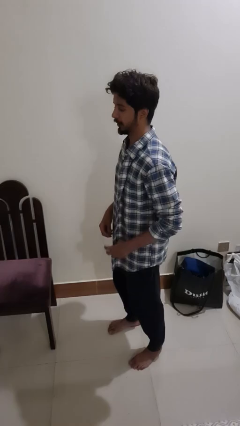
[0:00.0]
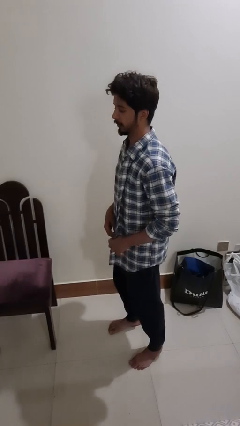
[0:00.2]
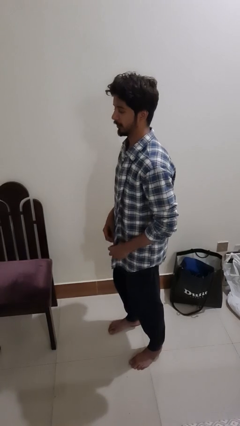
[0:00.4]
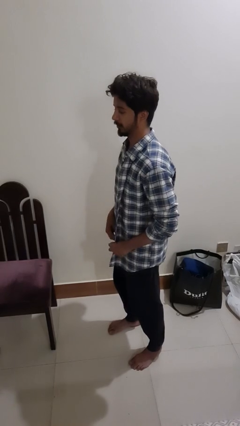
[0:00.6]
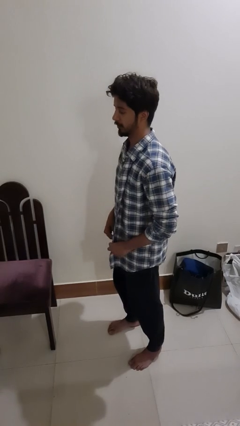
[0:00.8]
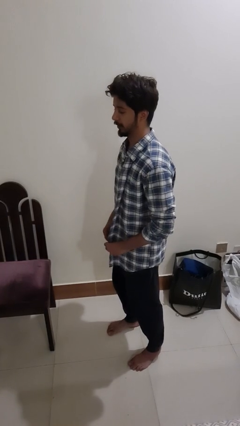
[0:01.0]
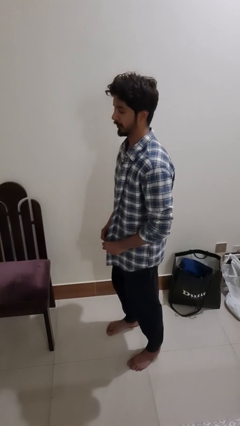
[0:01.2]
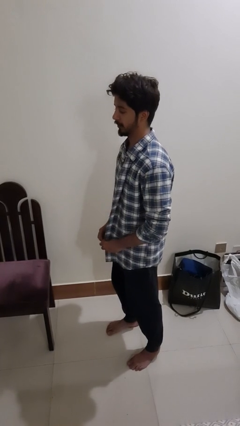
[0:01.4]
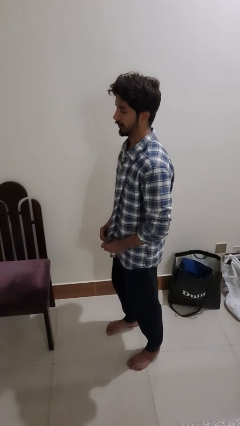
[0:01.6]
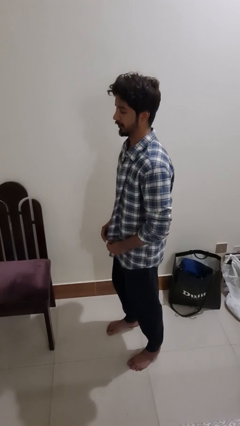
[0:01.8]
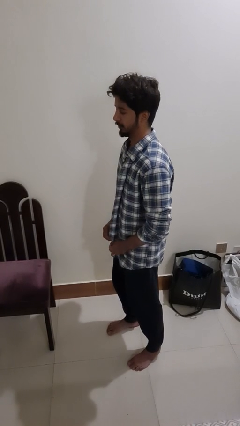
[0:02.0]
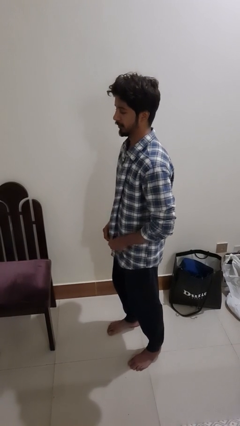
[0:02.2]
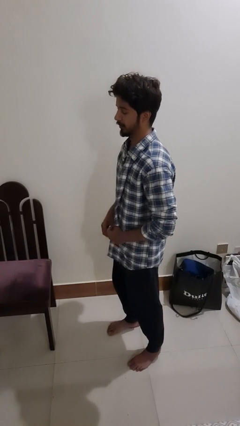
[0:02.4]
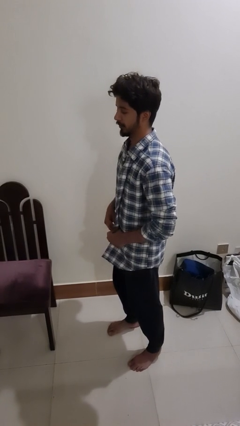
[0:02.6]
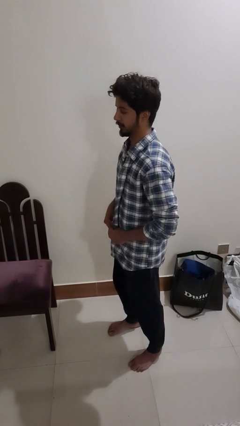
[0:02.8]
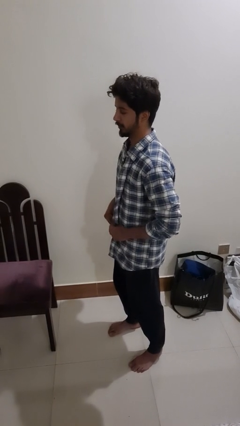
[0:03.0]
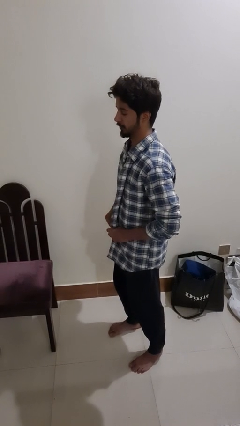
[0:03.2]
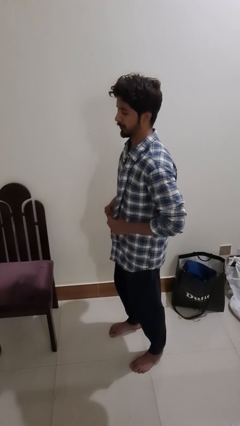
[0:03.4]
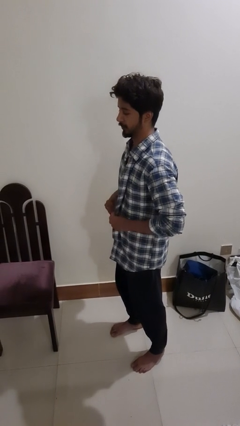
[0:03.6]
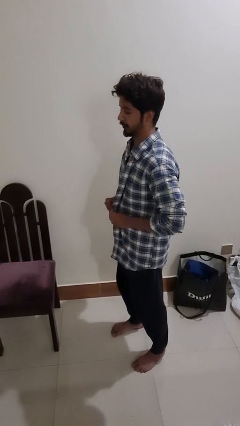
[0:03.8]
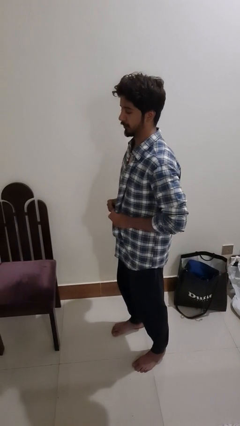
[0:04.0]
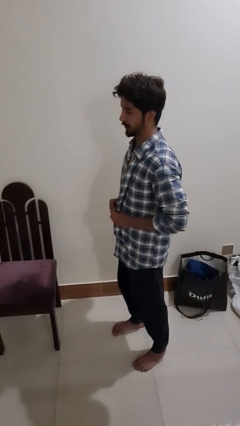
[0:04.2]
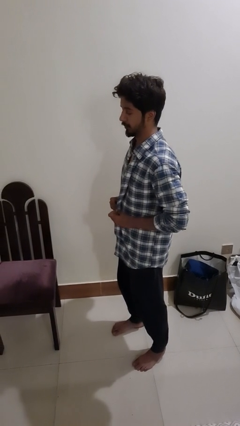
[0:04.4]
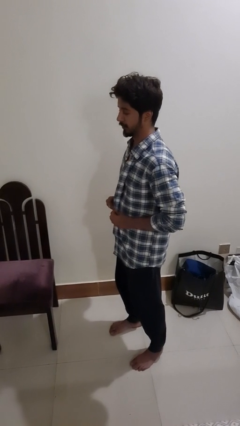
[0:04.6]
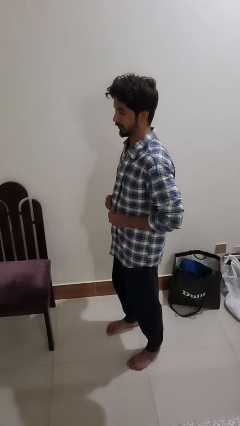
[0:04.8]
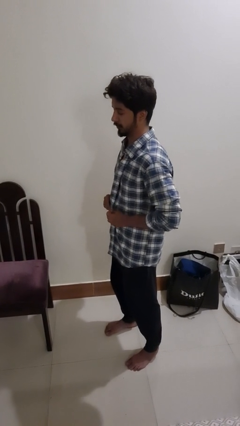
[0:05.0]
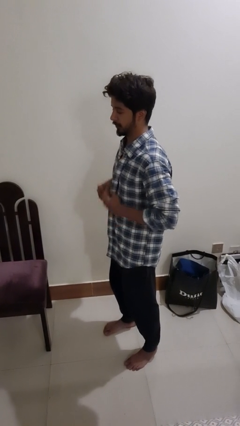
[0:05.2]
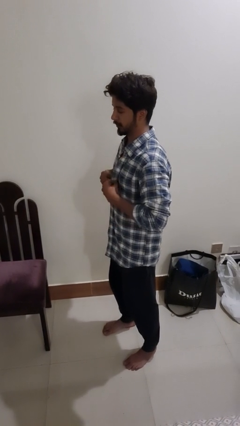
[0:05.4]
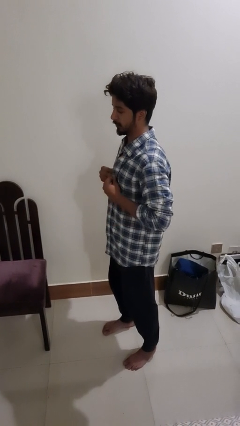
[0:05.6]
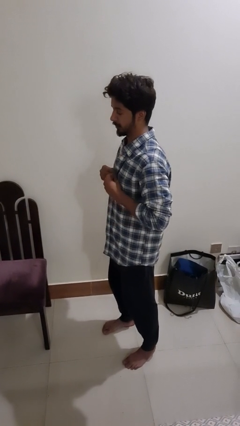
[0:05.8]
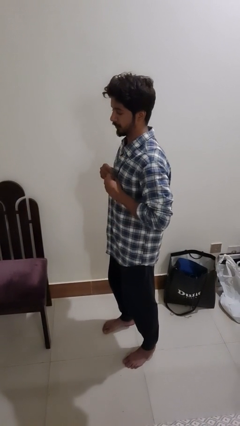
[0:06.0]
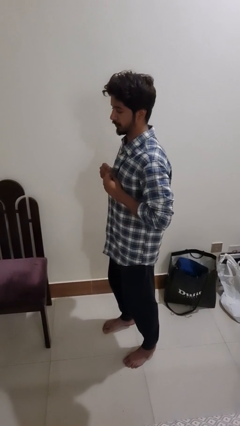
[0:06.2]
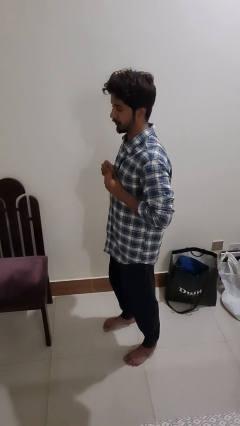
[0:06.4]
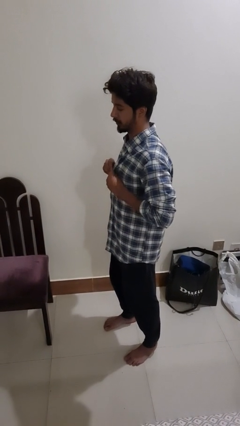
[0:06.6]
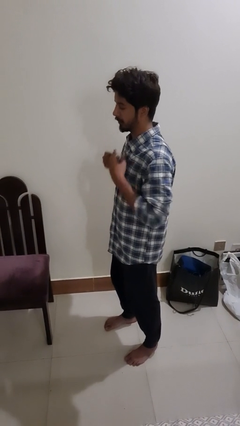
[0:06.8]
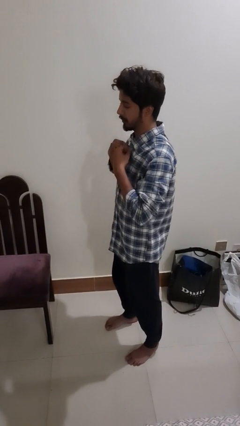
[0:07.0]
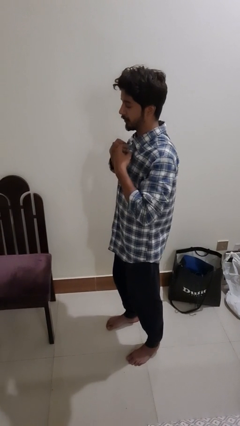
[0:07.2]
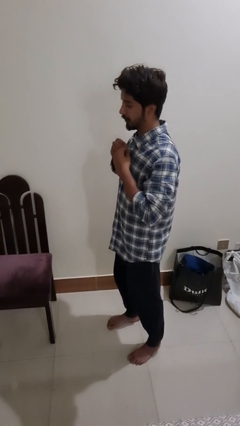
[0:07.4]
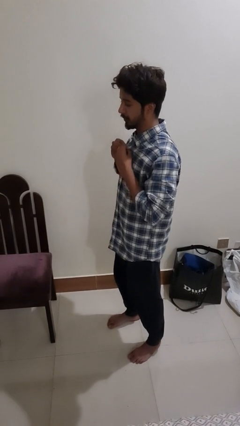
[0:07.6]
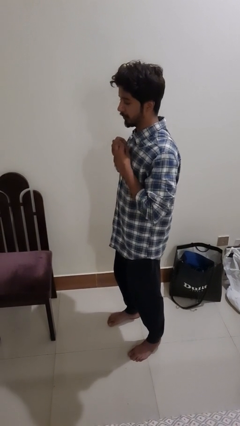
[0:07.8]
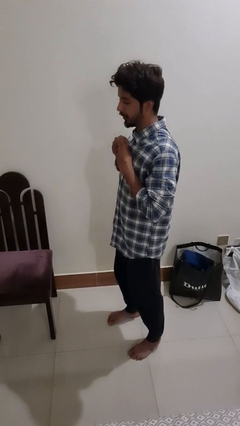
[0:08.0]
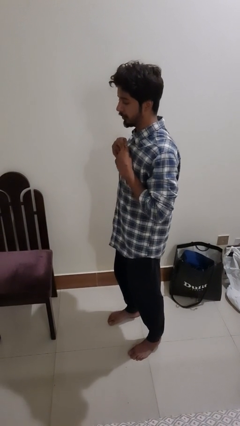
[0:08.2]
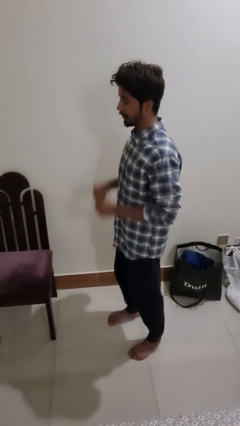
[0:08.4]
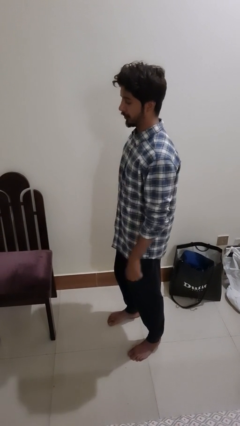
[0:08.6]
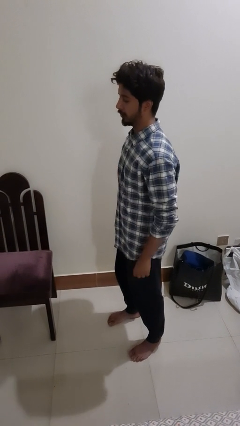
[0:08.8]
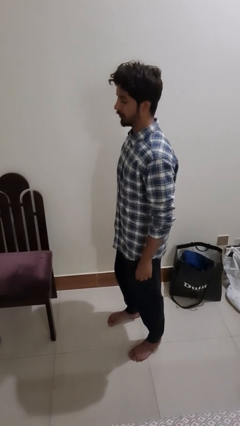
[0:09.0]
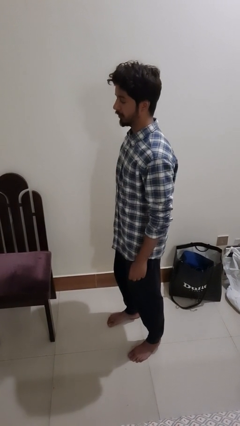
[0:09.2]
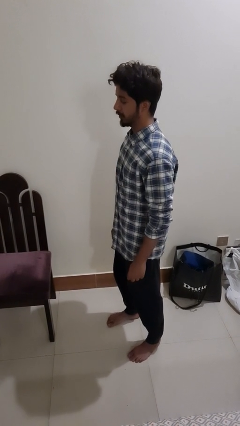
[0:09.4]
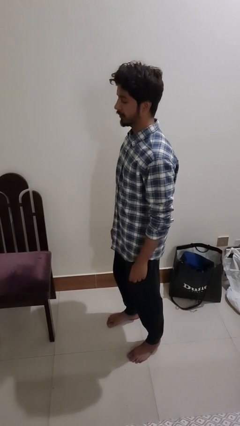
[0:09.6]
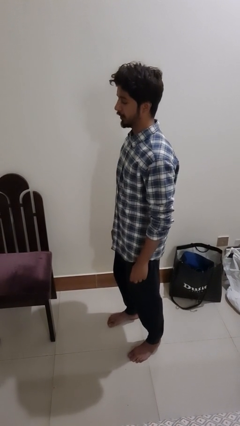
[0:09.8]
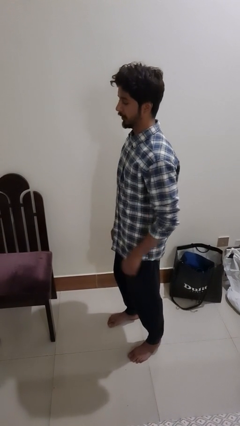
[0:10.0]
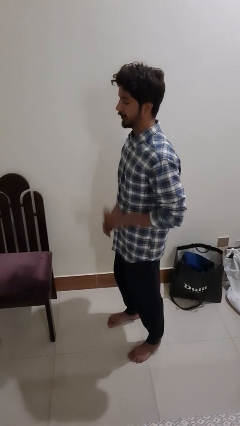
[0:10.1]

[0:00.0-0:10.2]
person buttons shirt

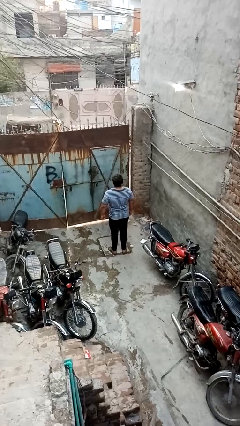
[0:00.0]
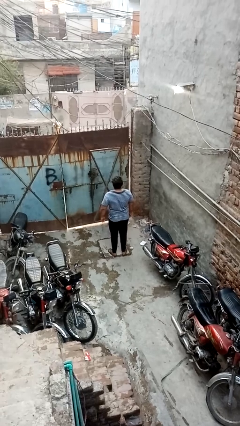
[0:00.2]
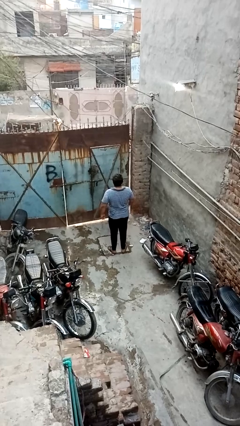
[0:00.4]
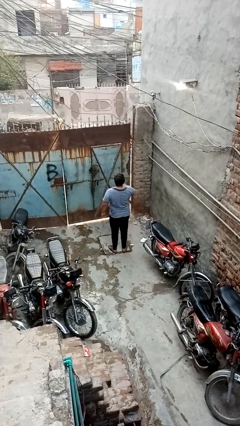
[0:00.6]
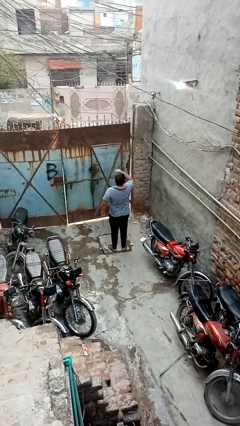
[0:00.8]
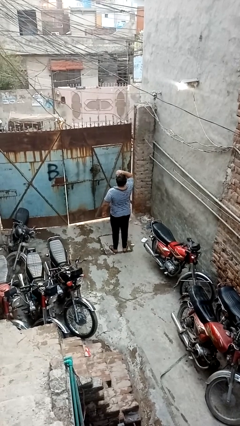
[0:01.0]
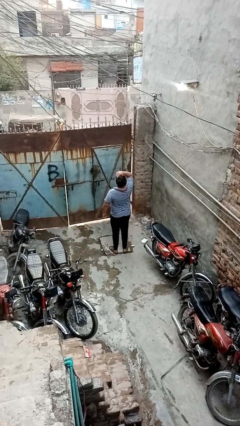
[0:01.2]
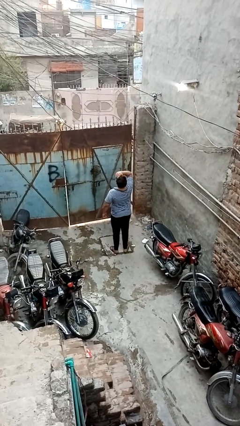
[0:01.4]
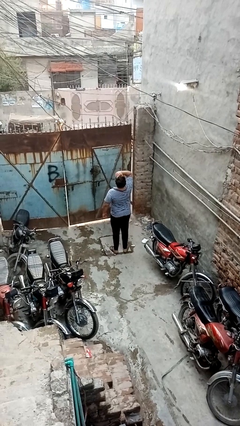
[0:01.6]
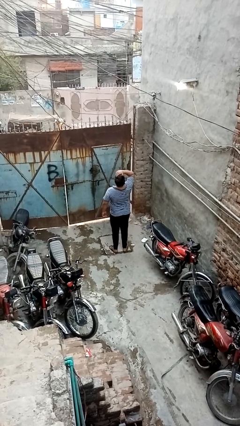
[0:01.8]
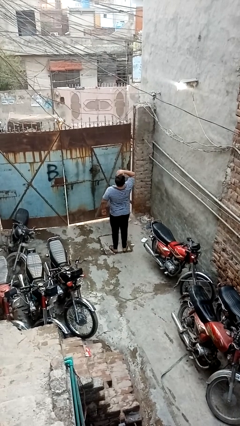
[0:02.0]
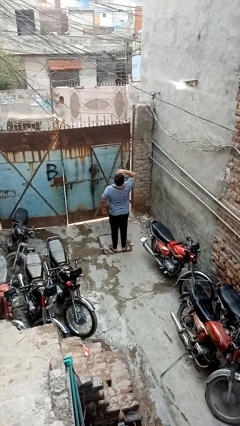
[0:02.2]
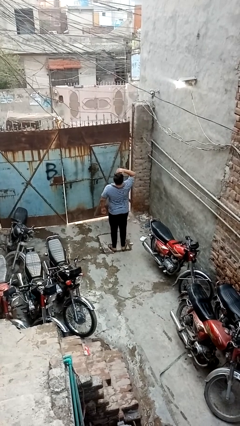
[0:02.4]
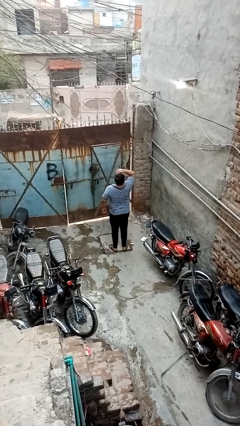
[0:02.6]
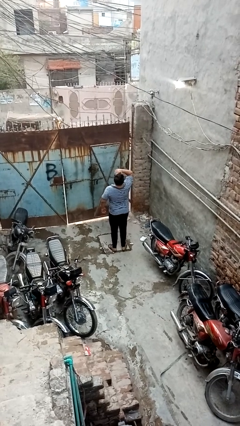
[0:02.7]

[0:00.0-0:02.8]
person shades eyes

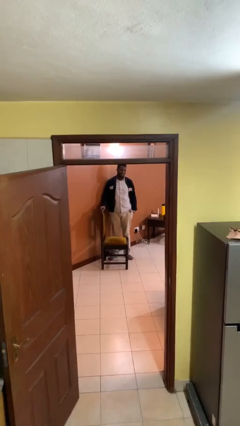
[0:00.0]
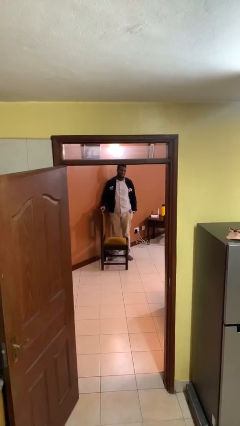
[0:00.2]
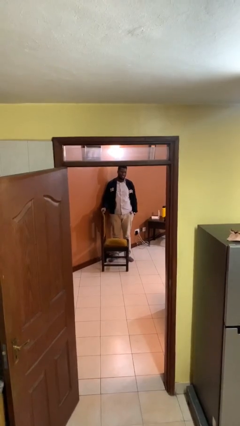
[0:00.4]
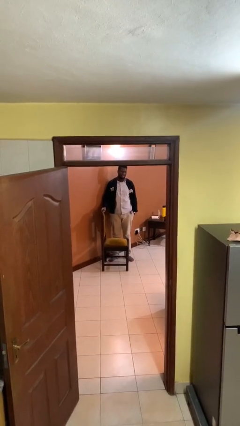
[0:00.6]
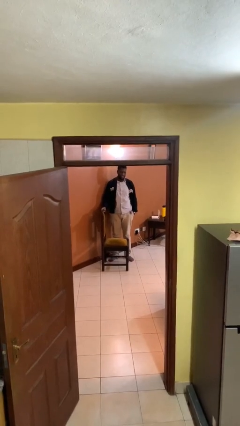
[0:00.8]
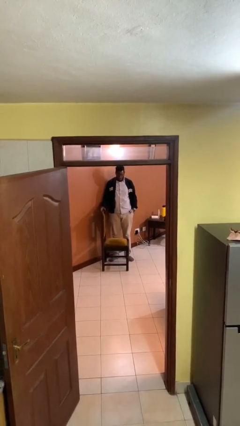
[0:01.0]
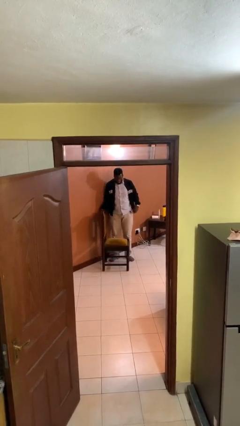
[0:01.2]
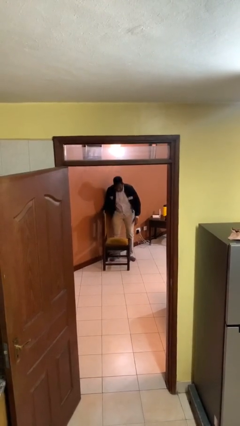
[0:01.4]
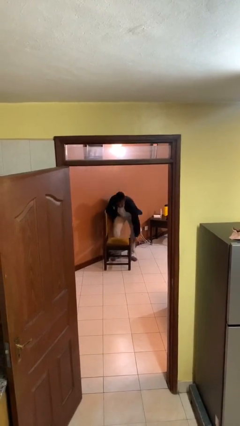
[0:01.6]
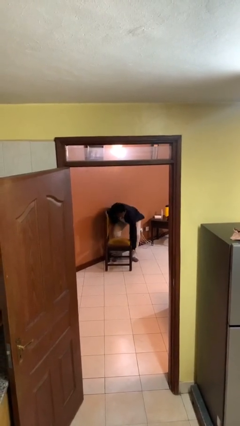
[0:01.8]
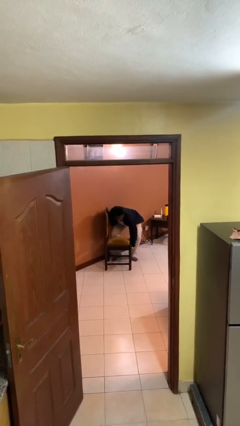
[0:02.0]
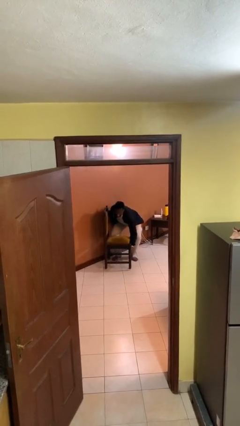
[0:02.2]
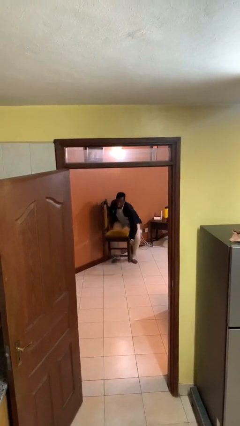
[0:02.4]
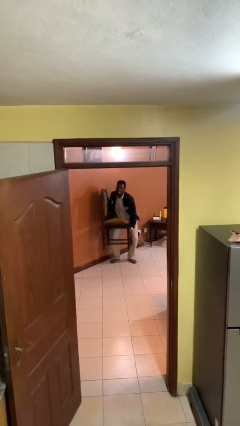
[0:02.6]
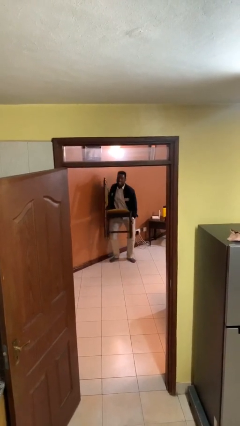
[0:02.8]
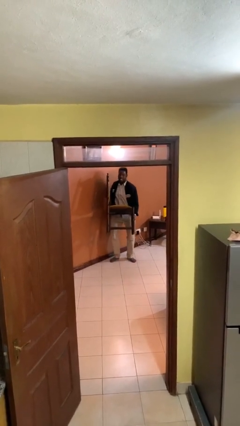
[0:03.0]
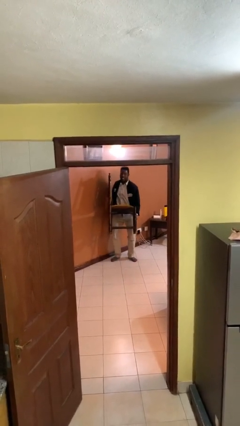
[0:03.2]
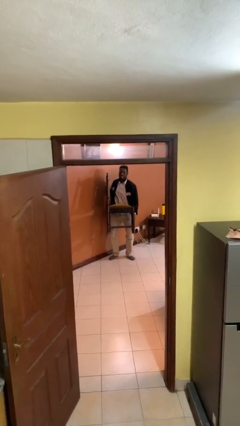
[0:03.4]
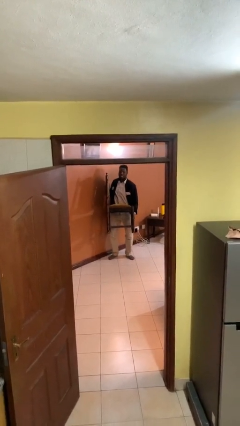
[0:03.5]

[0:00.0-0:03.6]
person picks up object from floor

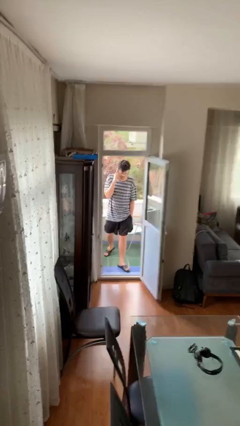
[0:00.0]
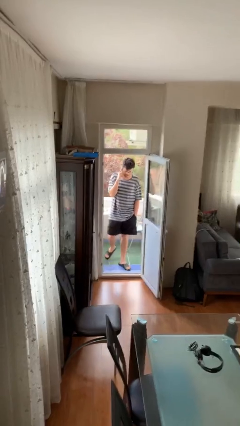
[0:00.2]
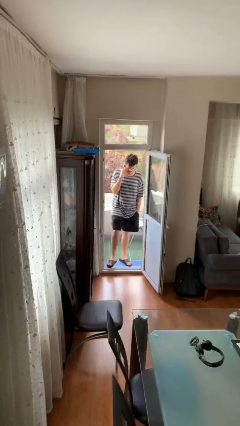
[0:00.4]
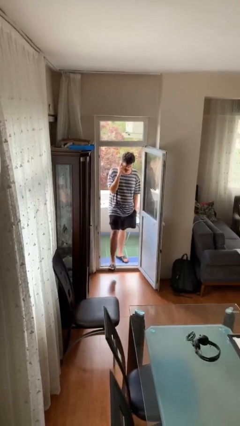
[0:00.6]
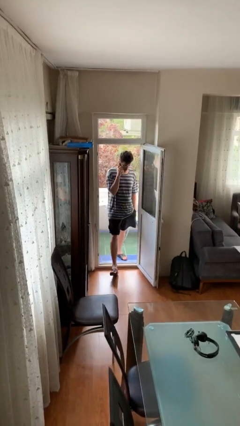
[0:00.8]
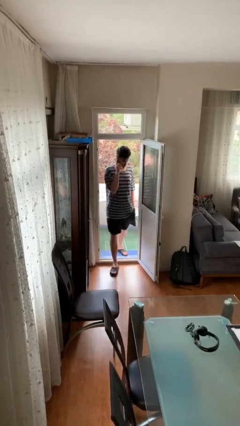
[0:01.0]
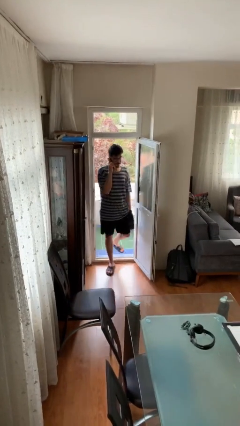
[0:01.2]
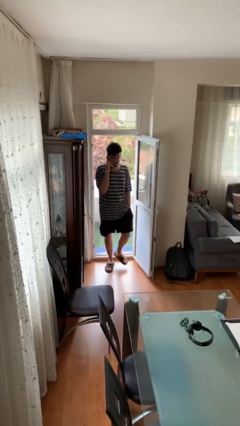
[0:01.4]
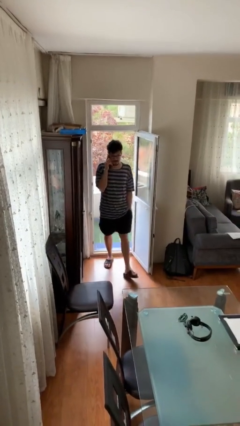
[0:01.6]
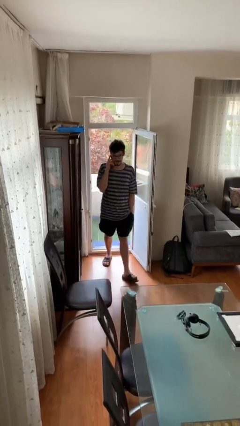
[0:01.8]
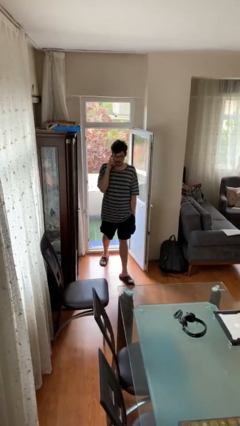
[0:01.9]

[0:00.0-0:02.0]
person enters scene through structure
